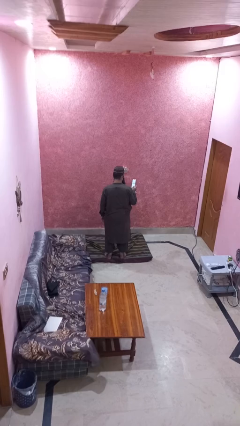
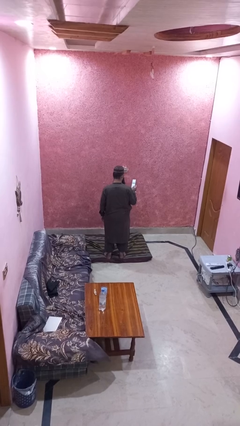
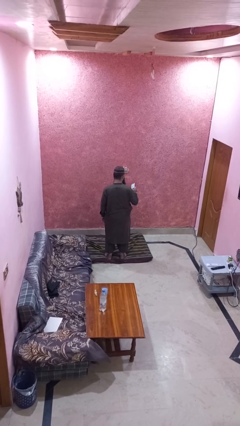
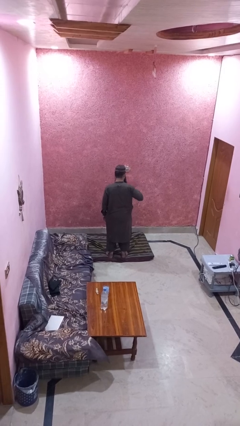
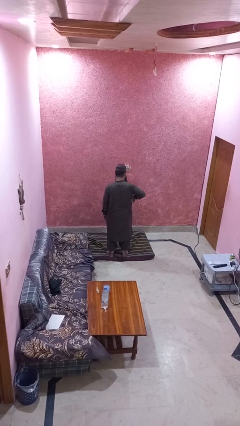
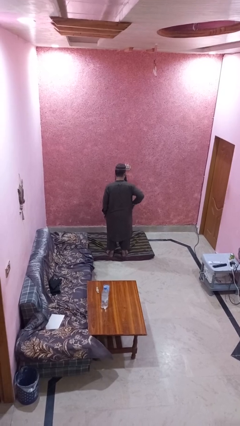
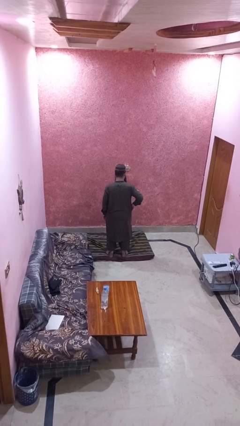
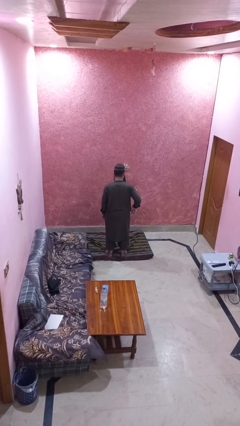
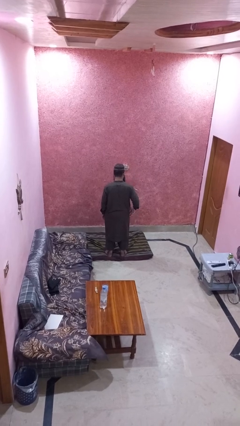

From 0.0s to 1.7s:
person puts phone into pocket

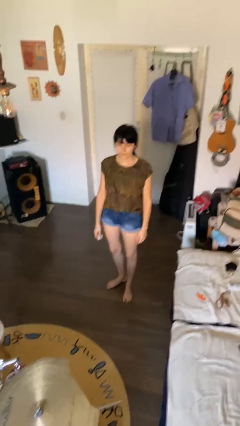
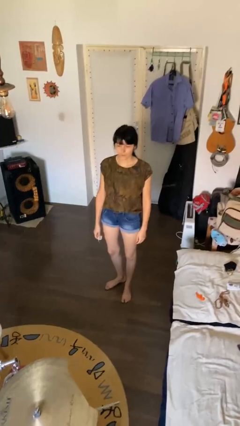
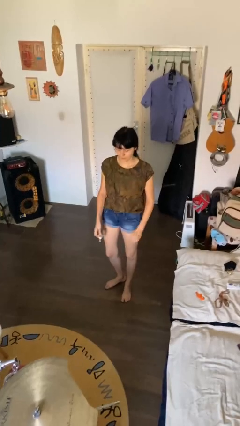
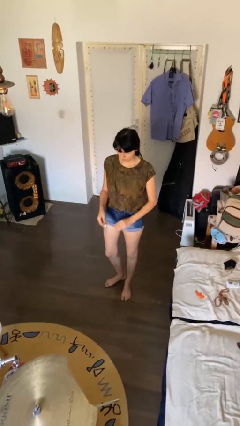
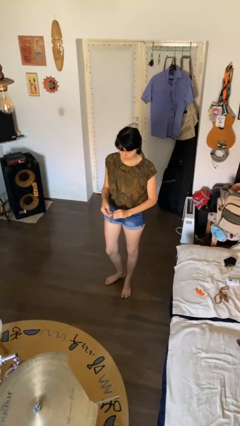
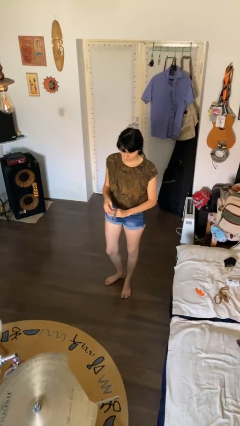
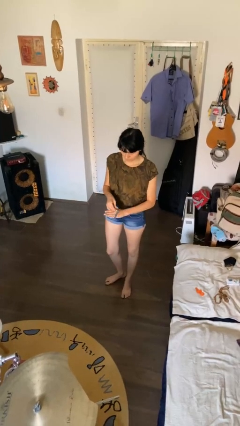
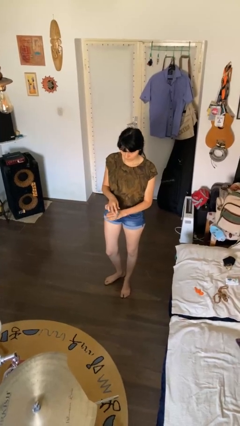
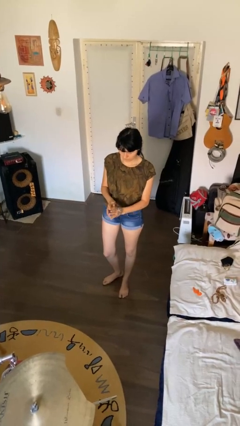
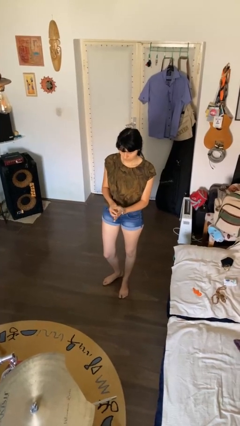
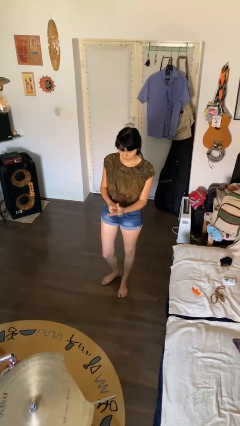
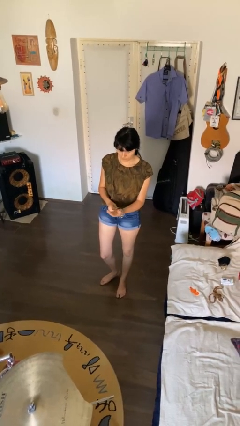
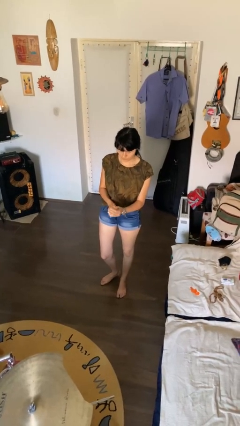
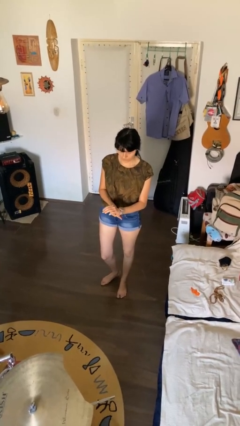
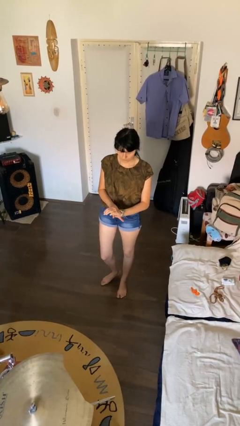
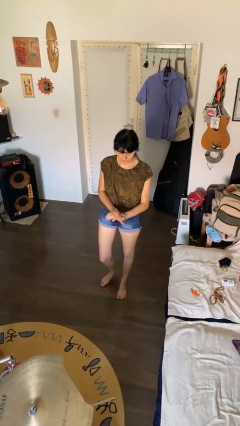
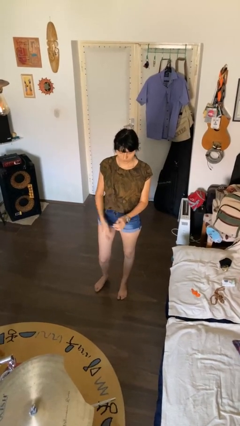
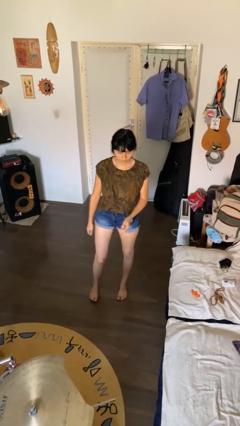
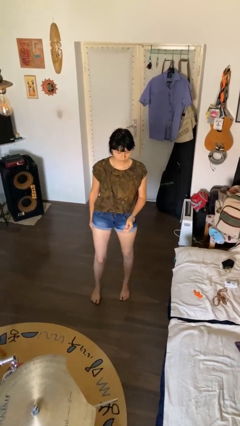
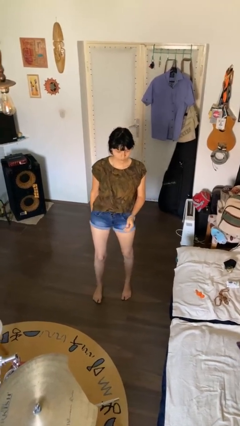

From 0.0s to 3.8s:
person puts on wristwatch

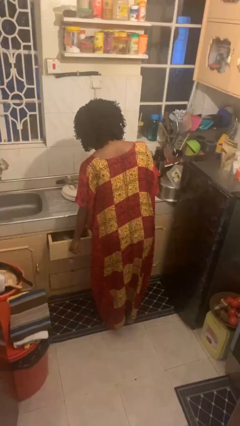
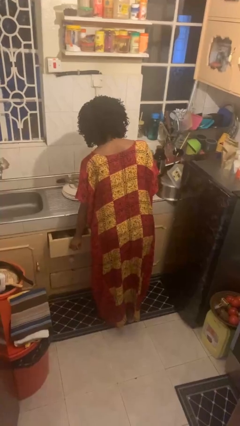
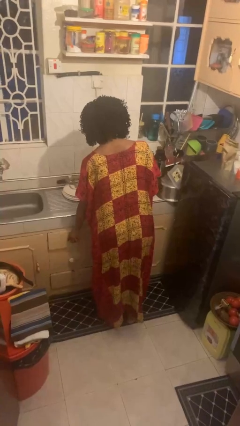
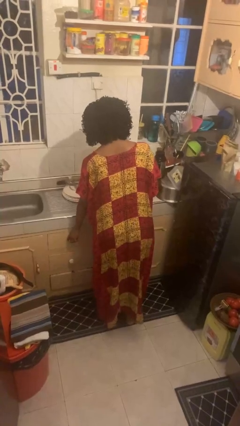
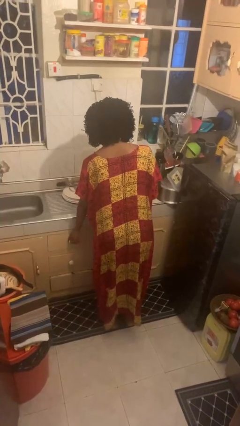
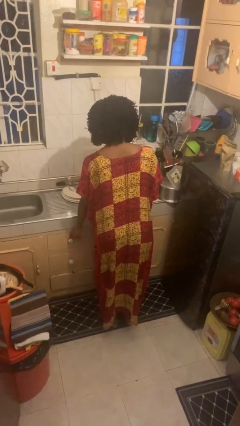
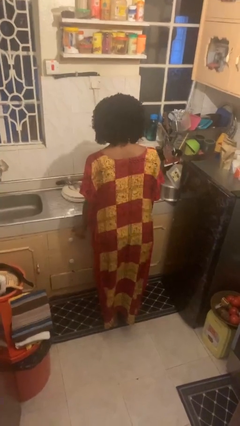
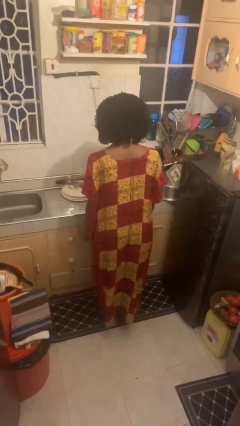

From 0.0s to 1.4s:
person closes kitchen drawer

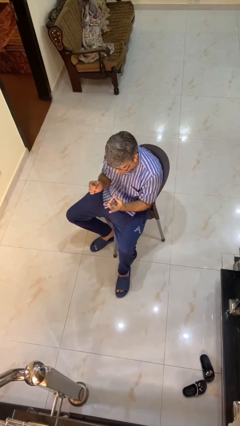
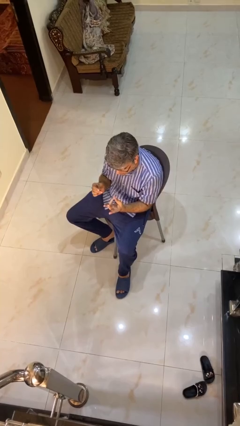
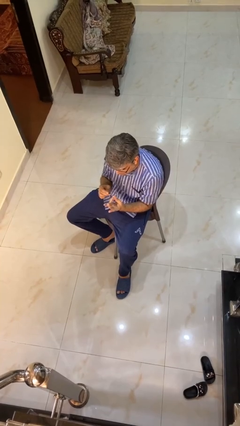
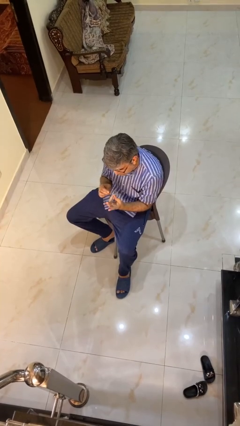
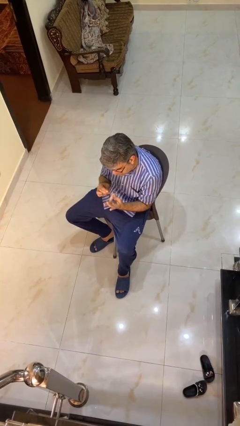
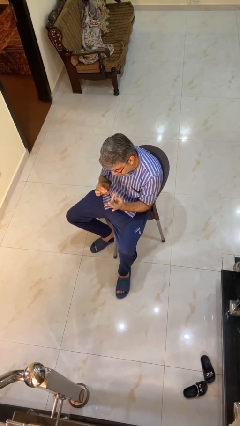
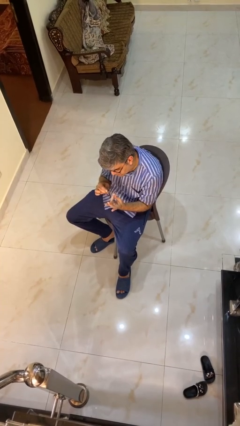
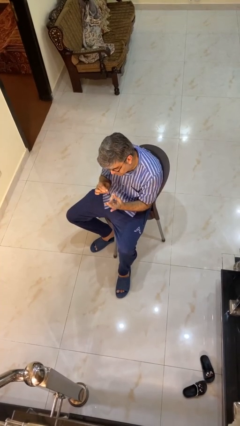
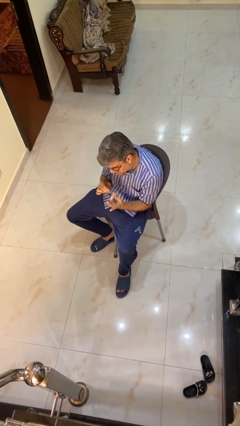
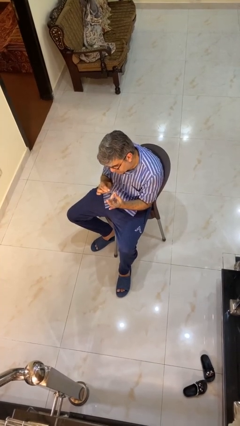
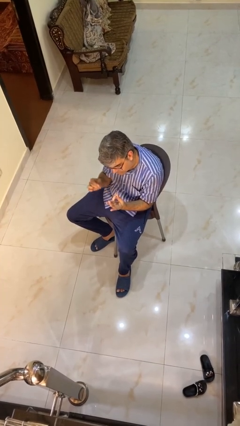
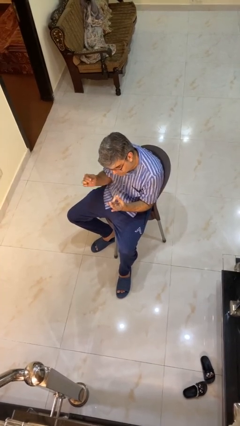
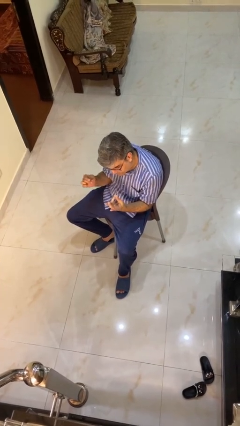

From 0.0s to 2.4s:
person files fingernails

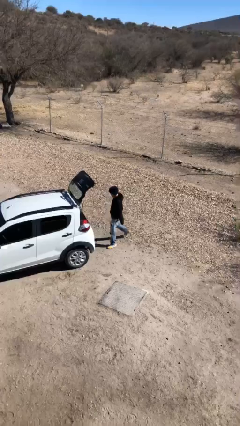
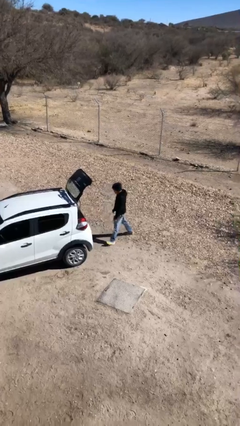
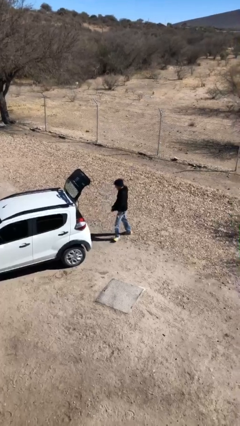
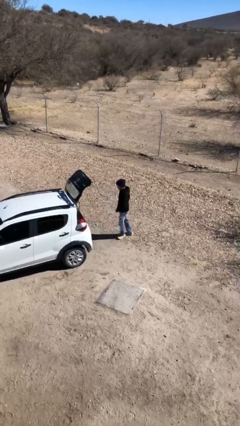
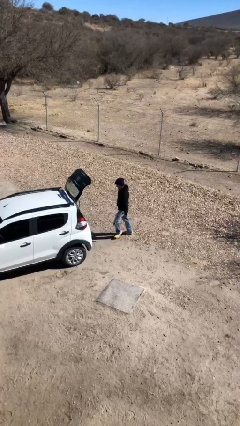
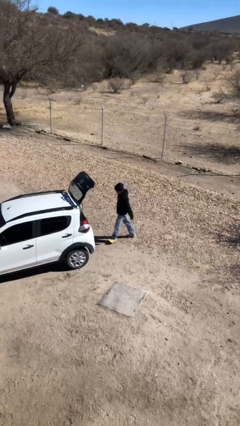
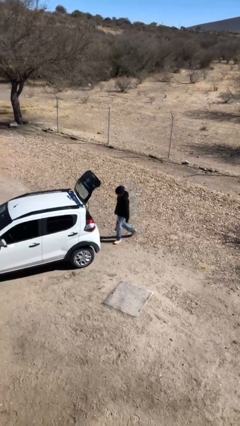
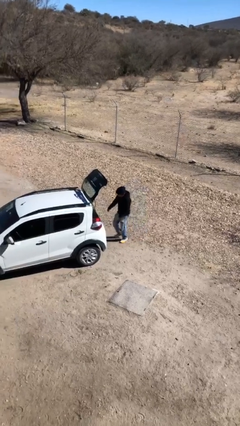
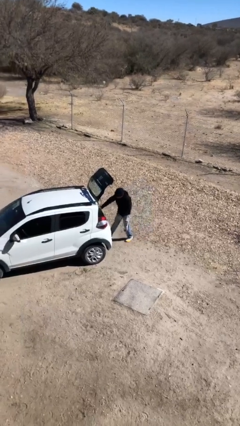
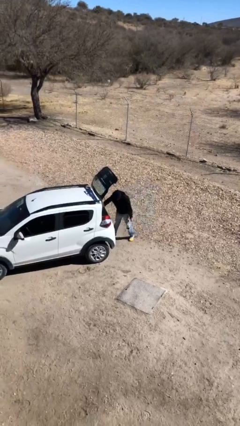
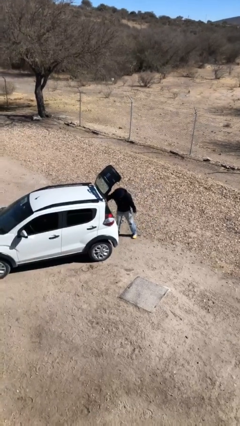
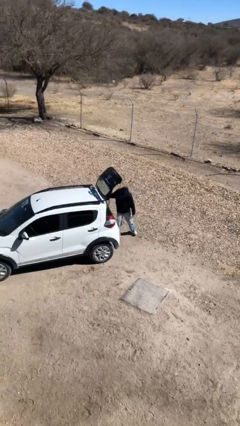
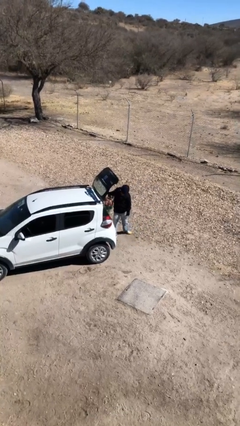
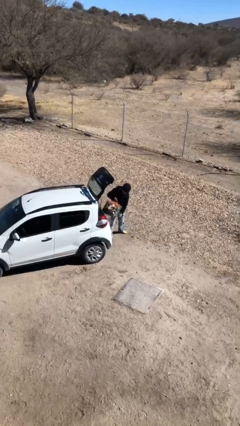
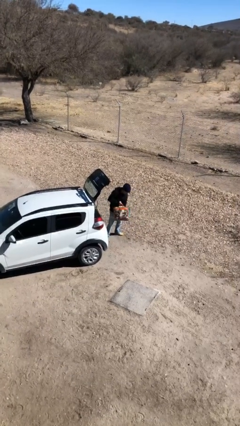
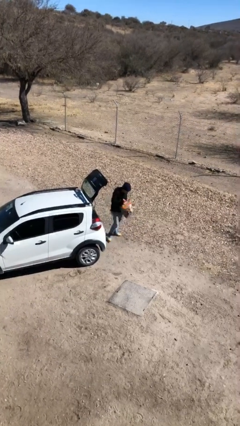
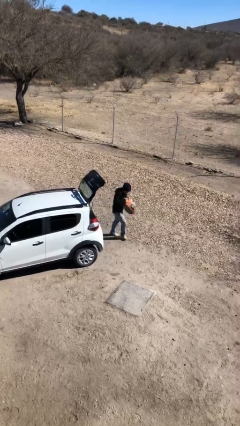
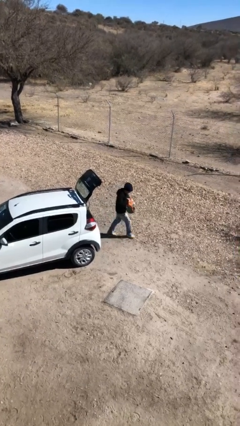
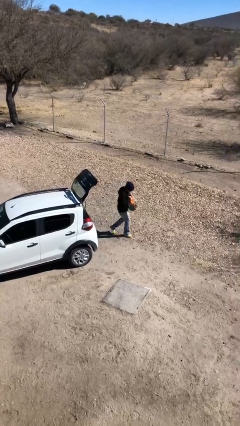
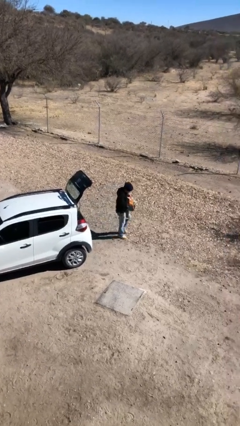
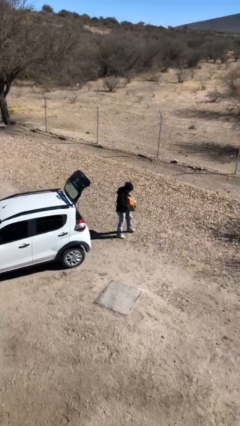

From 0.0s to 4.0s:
person unloads car

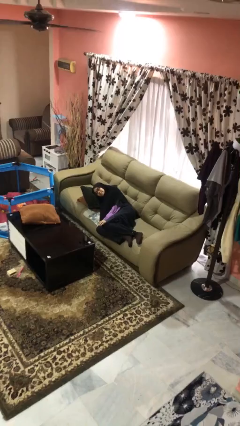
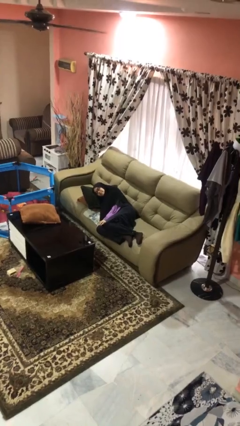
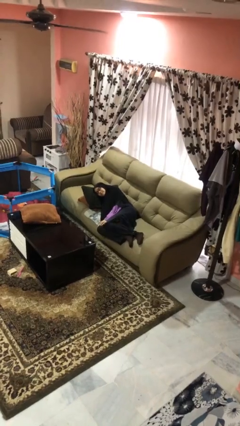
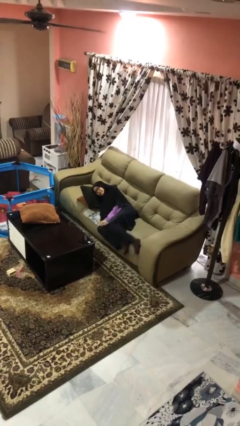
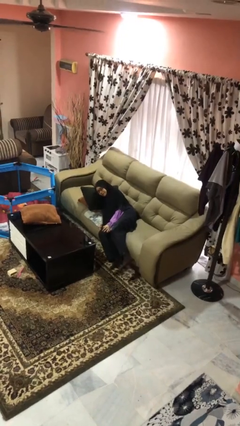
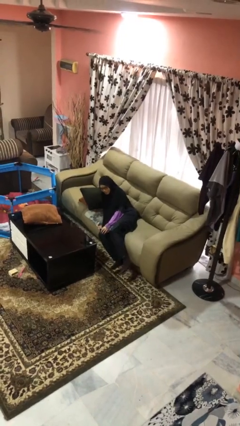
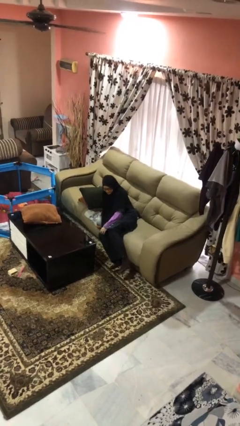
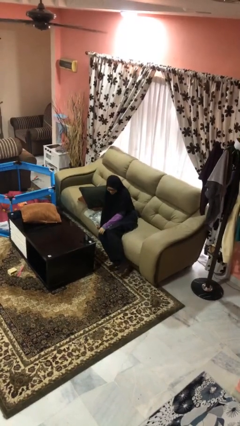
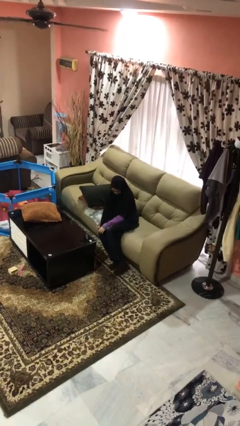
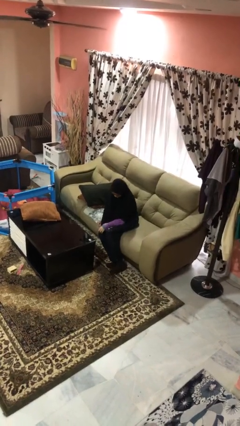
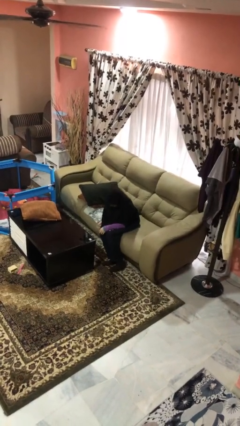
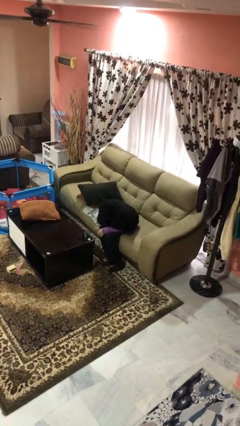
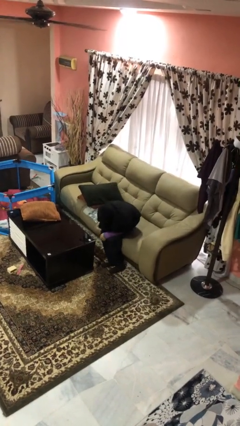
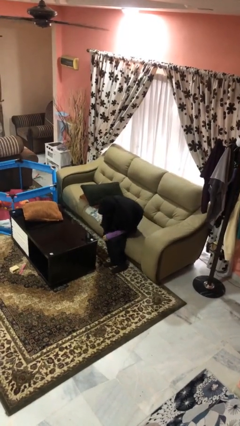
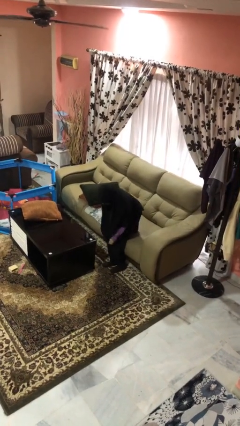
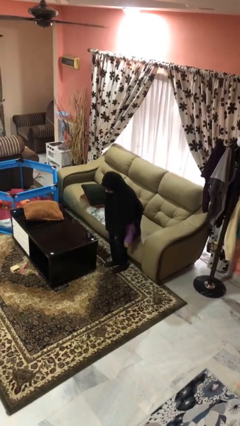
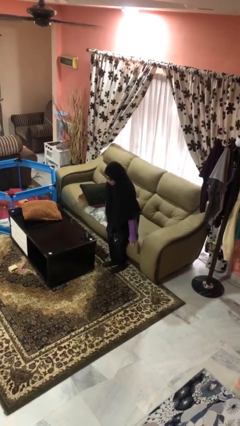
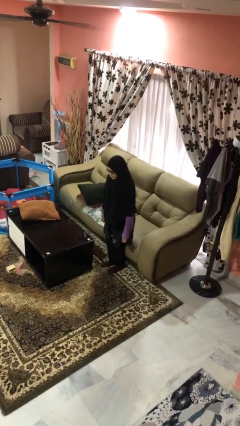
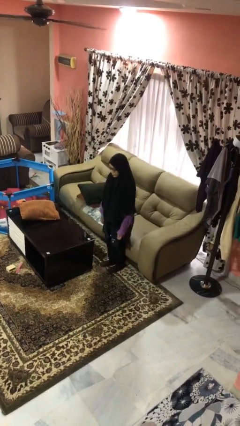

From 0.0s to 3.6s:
person stands up

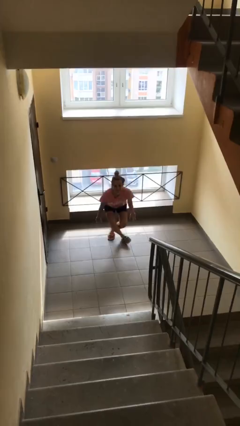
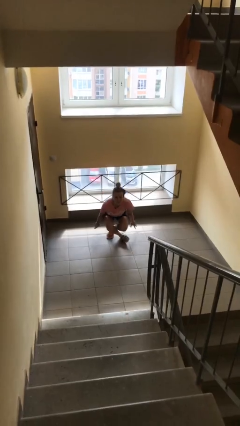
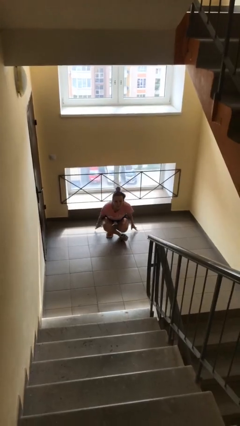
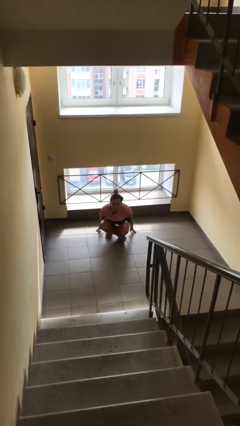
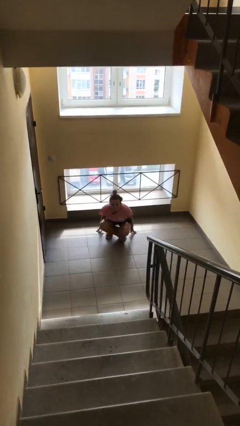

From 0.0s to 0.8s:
person sits crisscross
